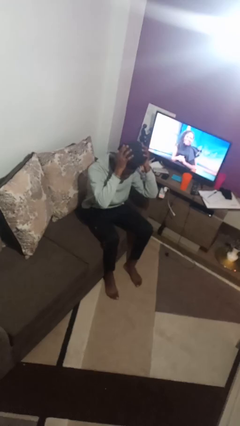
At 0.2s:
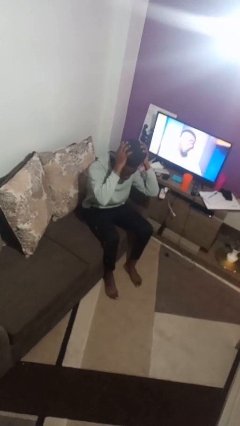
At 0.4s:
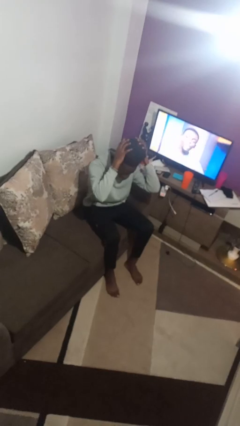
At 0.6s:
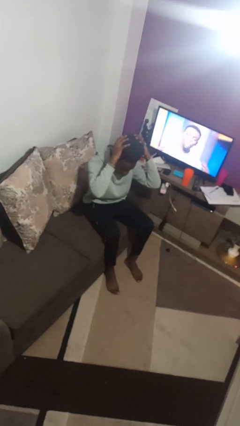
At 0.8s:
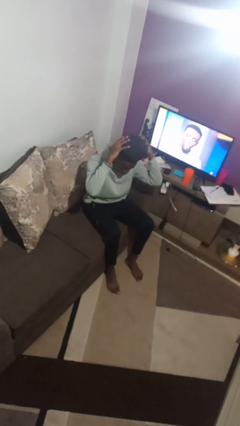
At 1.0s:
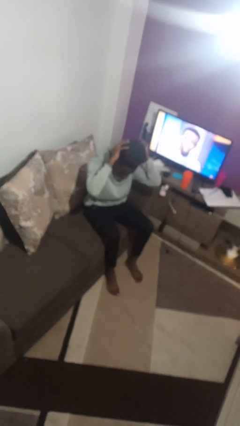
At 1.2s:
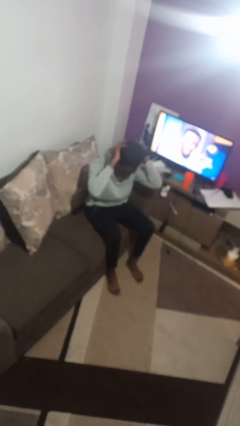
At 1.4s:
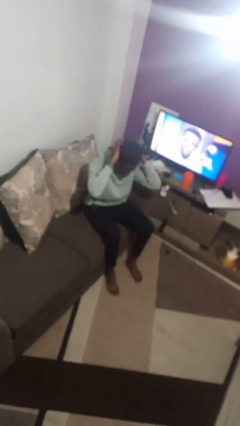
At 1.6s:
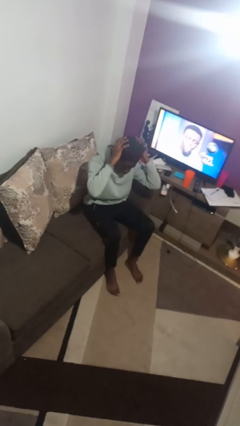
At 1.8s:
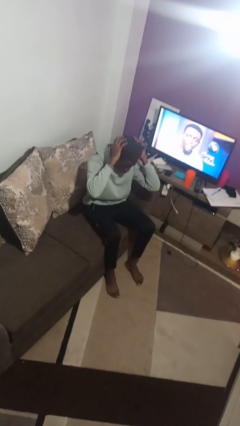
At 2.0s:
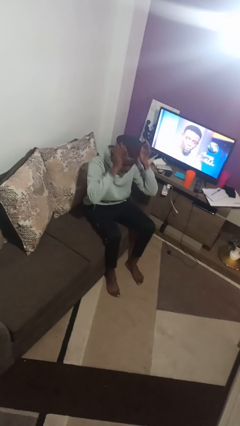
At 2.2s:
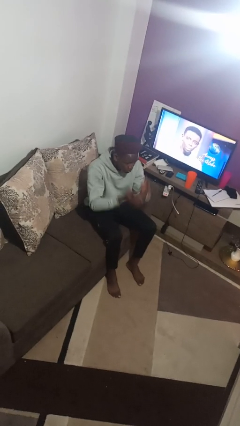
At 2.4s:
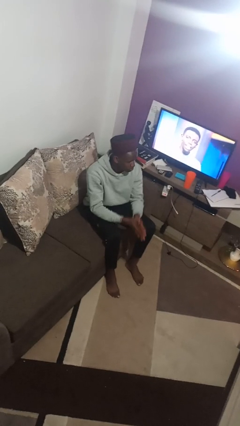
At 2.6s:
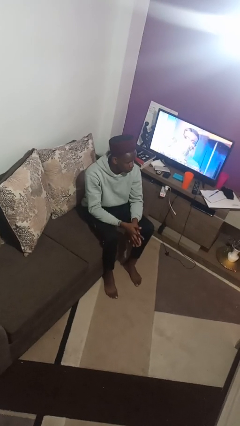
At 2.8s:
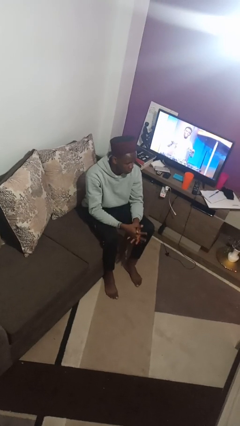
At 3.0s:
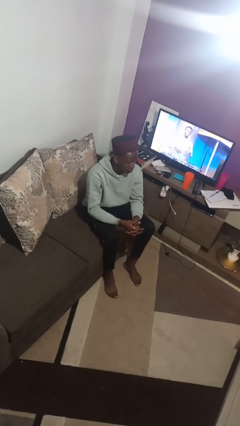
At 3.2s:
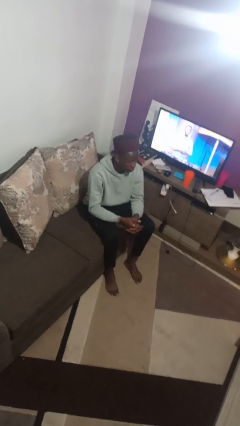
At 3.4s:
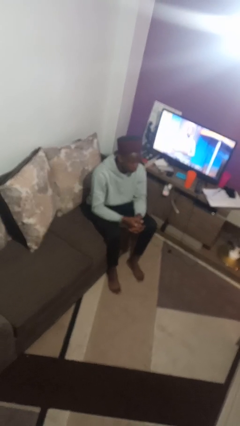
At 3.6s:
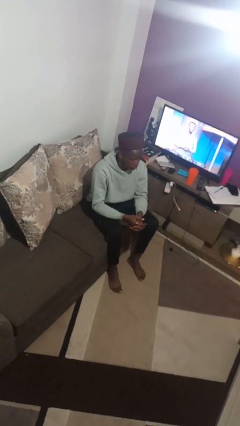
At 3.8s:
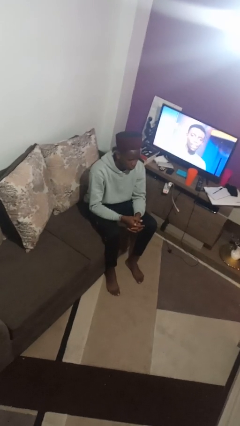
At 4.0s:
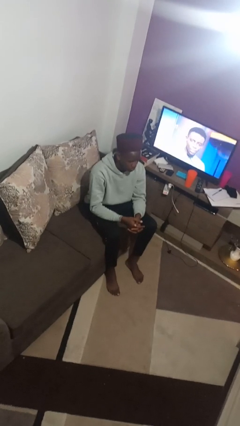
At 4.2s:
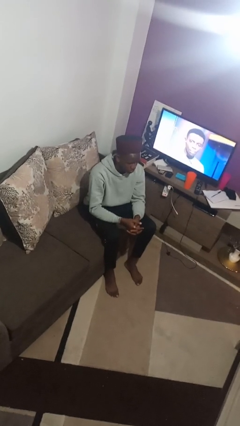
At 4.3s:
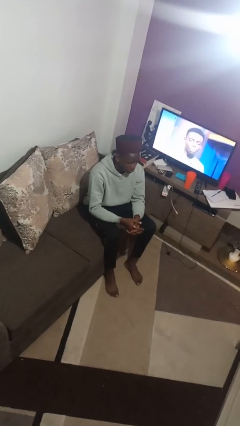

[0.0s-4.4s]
person puts on hat

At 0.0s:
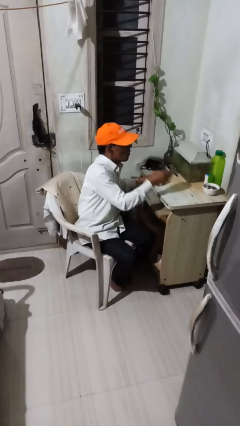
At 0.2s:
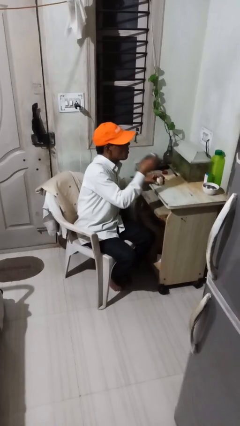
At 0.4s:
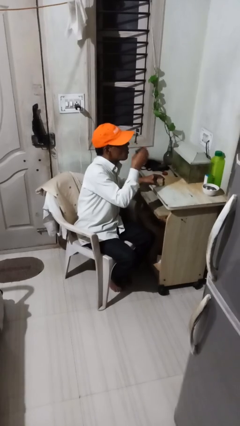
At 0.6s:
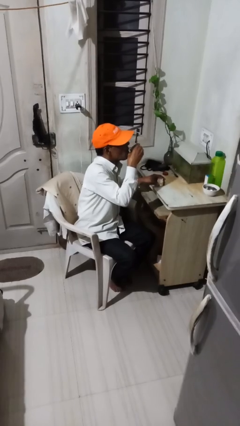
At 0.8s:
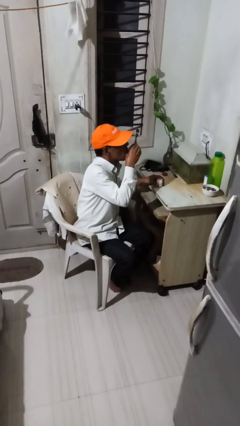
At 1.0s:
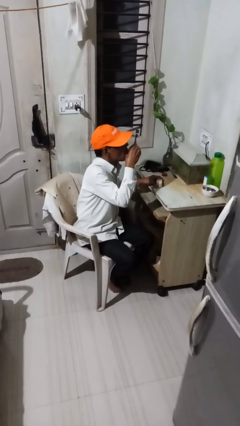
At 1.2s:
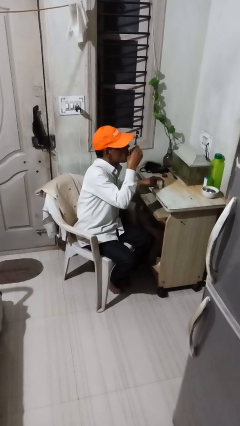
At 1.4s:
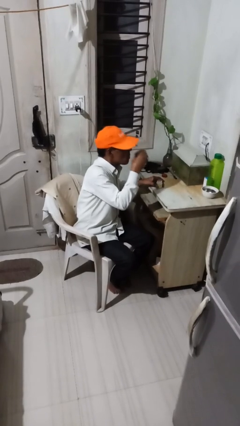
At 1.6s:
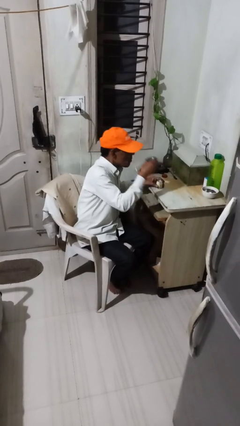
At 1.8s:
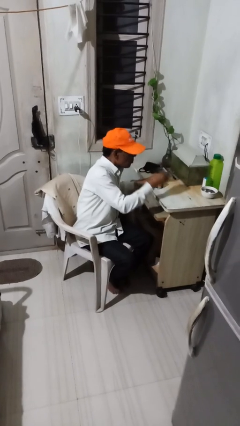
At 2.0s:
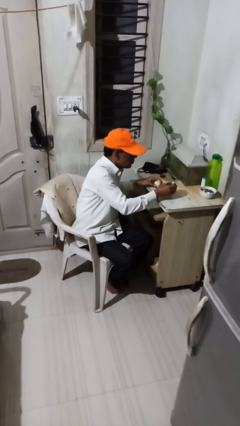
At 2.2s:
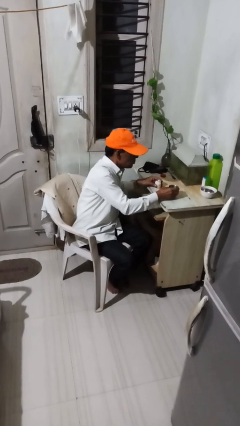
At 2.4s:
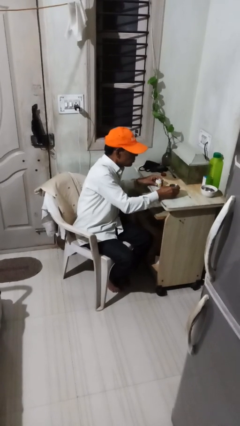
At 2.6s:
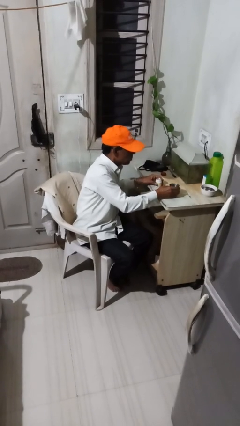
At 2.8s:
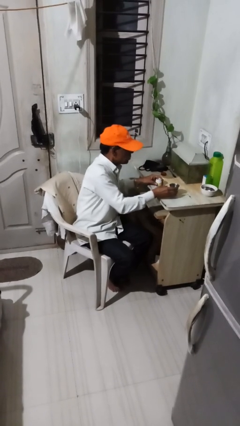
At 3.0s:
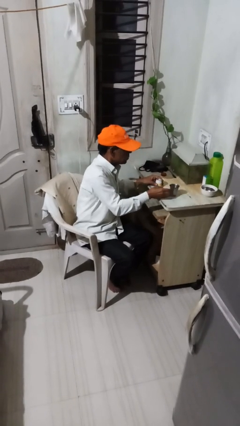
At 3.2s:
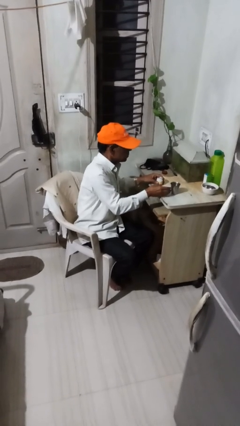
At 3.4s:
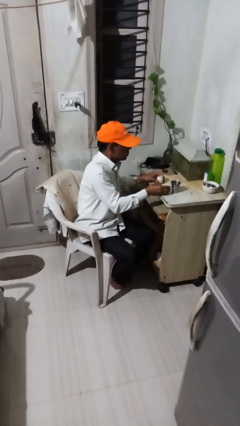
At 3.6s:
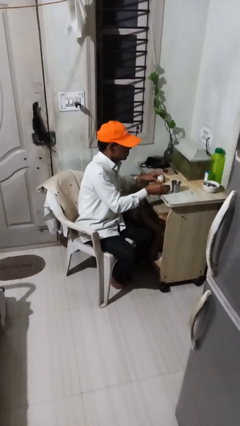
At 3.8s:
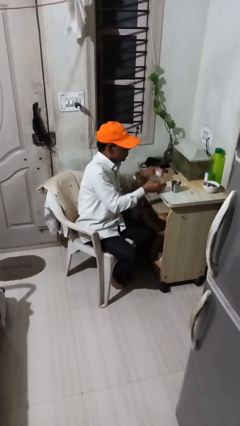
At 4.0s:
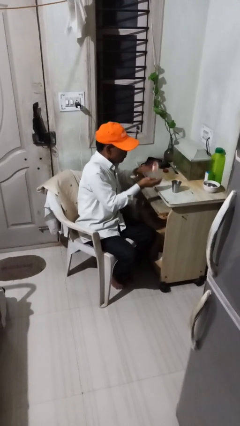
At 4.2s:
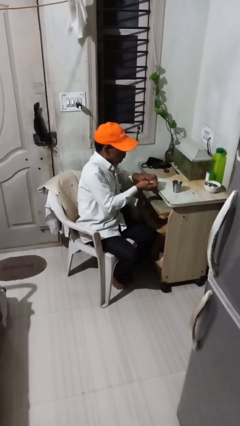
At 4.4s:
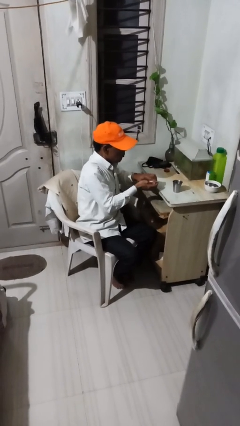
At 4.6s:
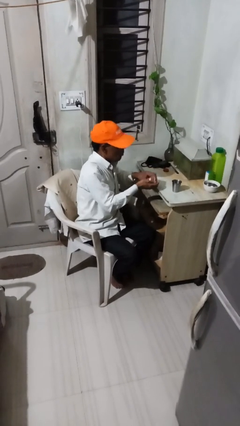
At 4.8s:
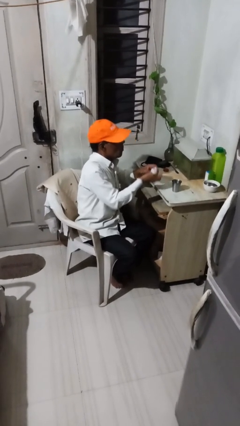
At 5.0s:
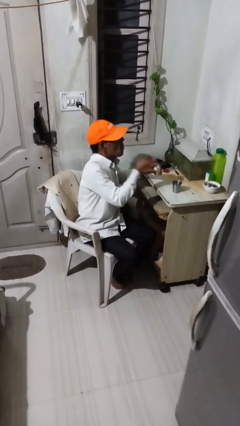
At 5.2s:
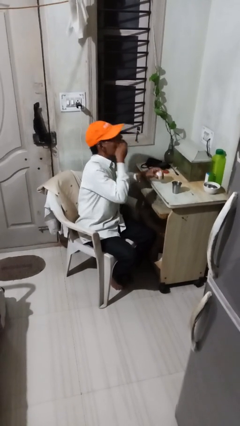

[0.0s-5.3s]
person folds socks

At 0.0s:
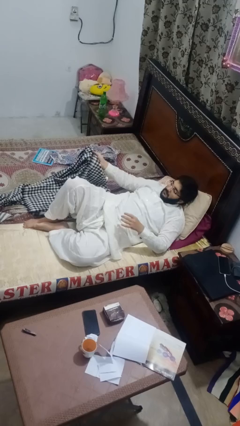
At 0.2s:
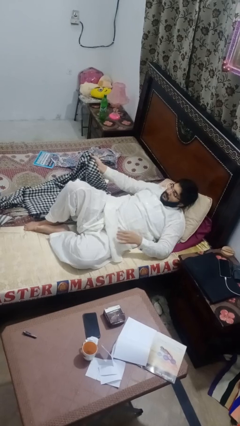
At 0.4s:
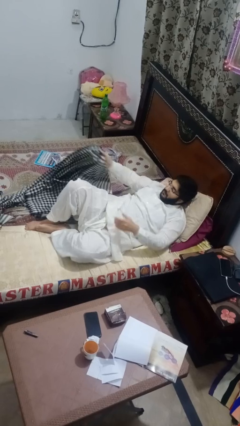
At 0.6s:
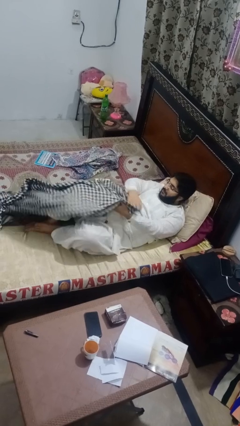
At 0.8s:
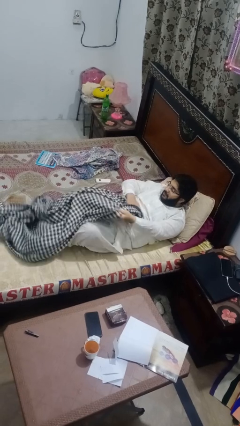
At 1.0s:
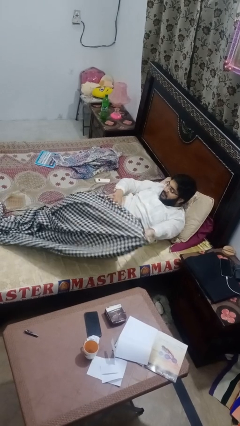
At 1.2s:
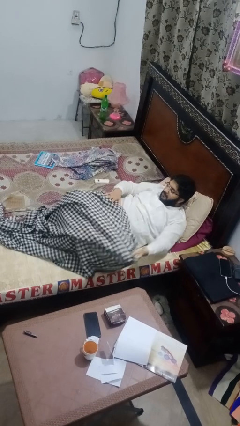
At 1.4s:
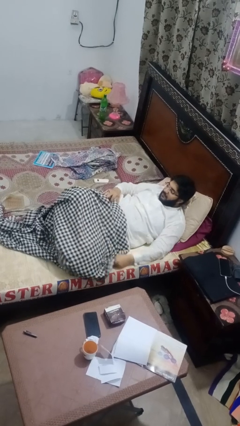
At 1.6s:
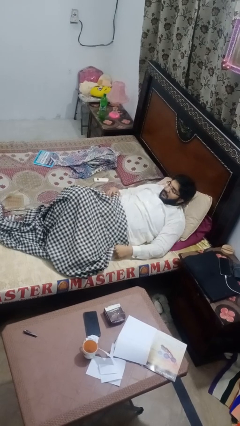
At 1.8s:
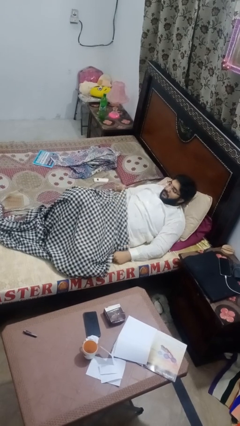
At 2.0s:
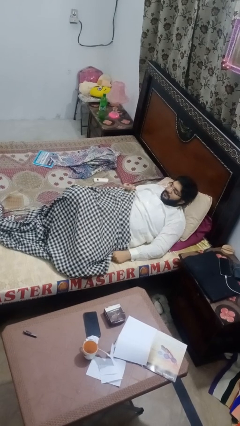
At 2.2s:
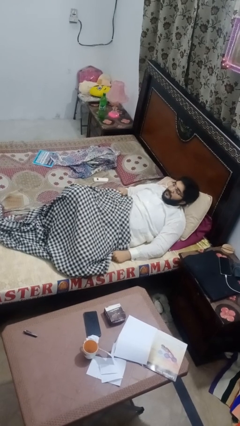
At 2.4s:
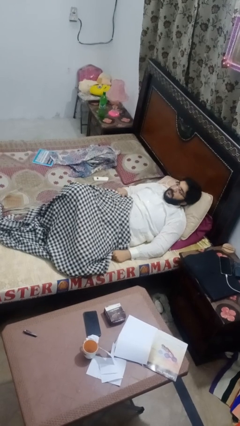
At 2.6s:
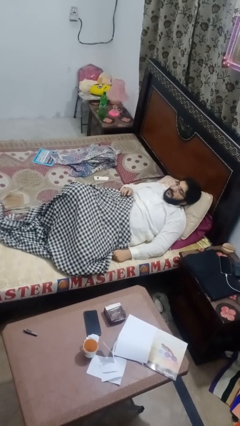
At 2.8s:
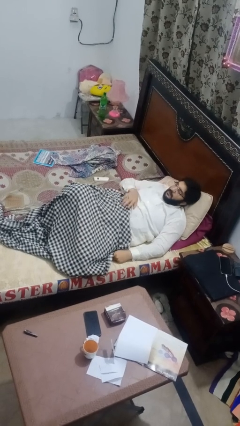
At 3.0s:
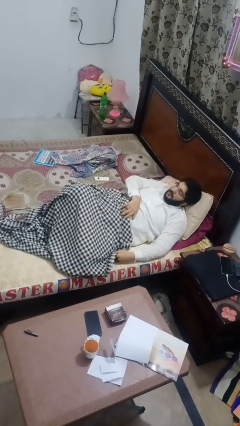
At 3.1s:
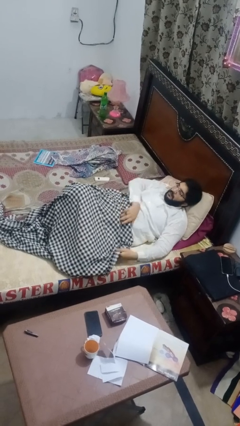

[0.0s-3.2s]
person covers with blanket

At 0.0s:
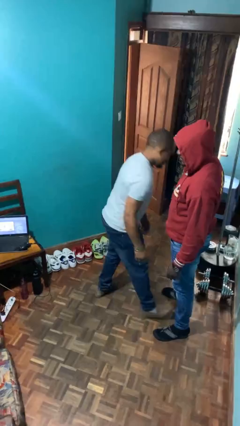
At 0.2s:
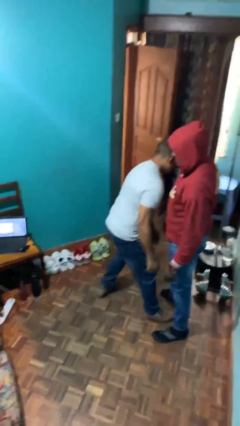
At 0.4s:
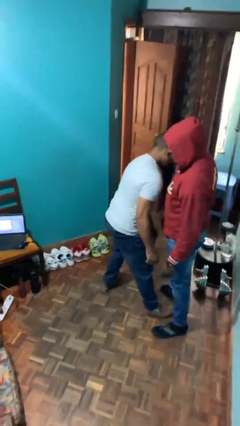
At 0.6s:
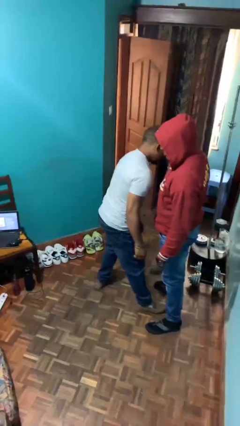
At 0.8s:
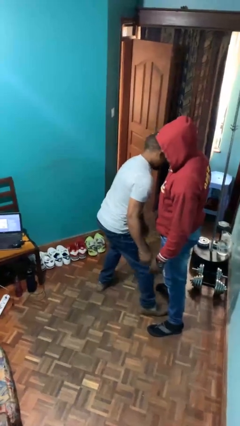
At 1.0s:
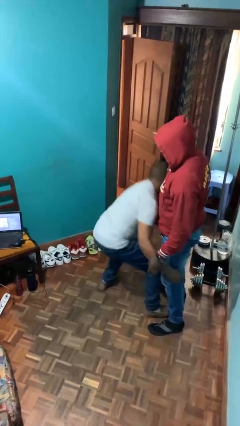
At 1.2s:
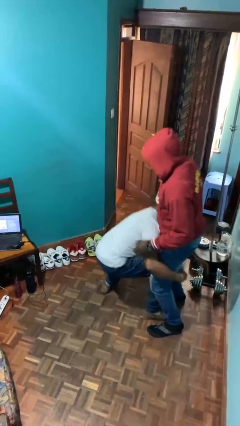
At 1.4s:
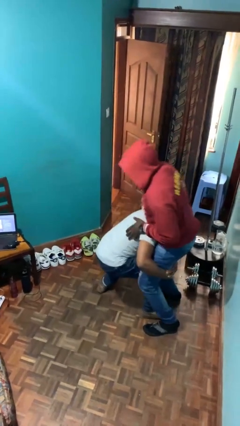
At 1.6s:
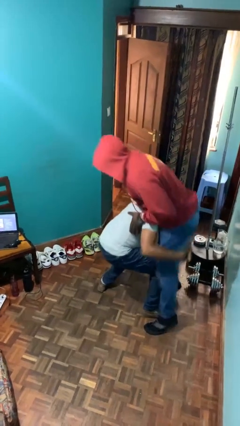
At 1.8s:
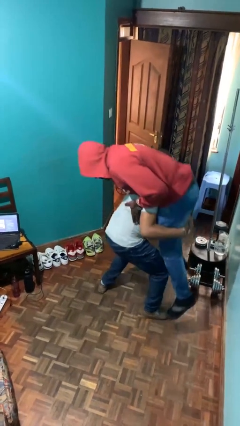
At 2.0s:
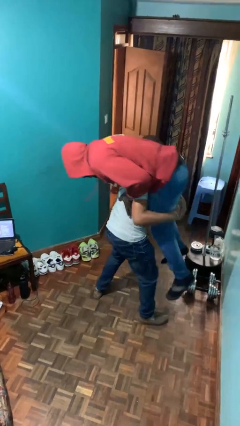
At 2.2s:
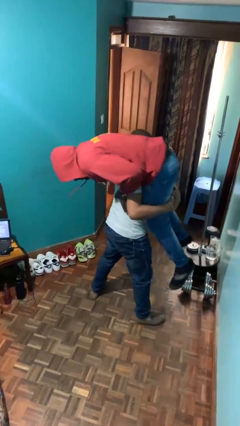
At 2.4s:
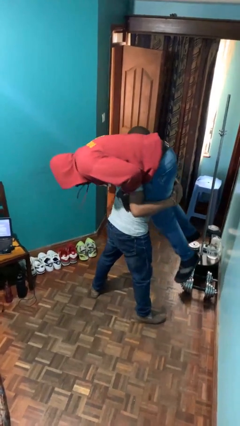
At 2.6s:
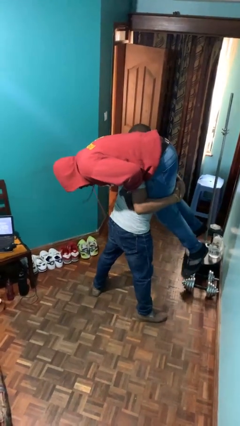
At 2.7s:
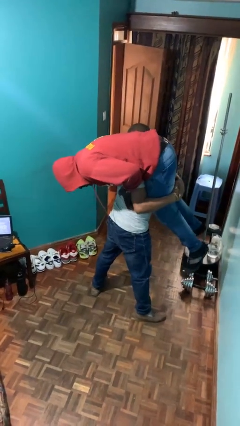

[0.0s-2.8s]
person carries person over shoulder

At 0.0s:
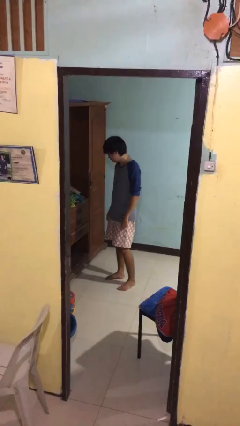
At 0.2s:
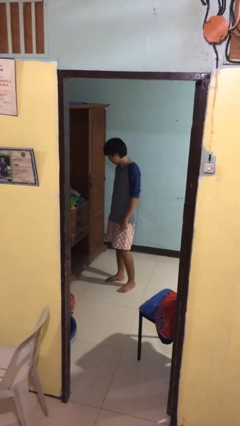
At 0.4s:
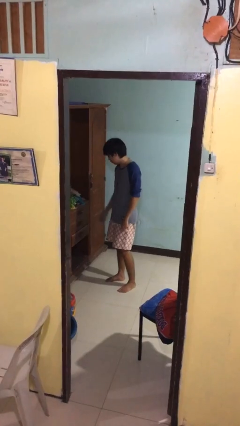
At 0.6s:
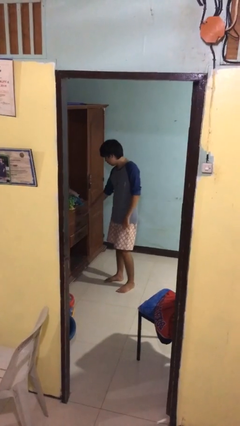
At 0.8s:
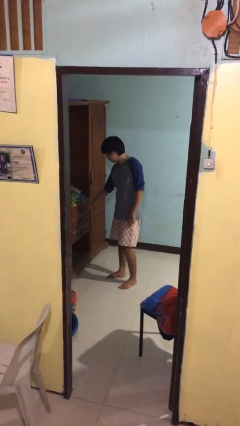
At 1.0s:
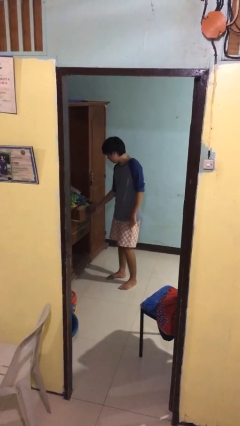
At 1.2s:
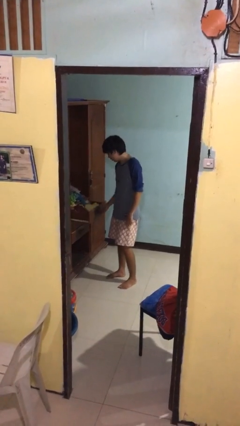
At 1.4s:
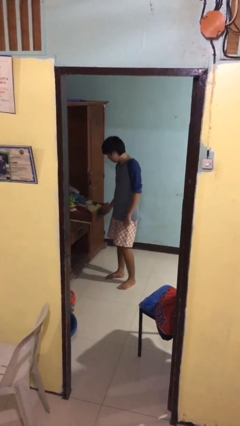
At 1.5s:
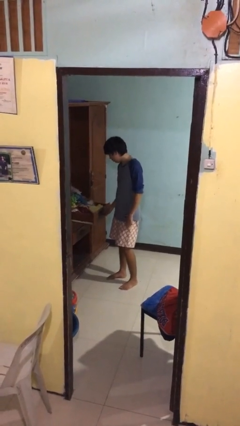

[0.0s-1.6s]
person opens dresser drawer

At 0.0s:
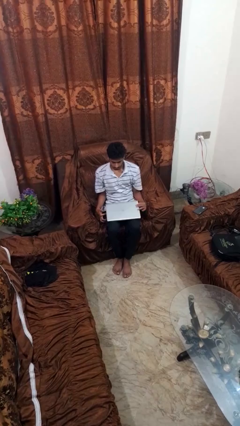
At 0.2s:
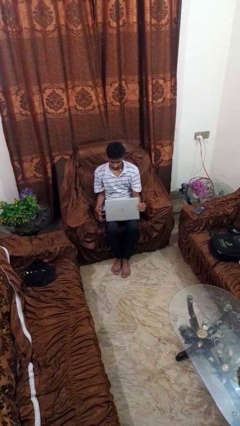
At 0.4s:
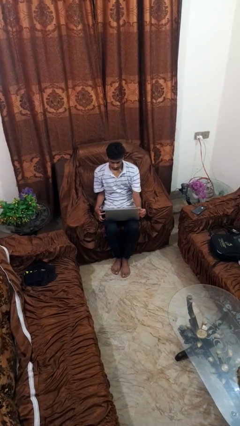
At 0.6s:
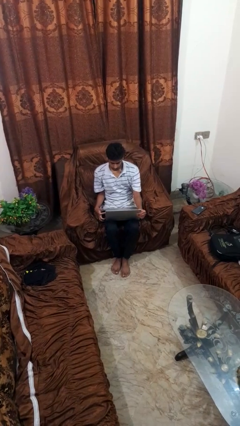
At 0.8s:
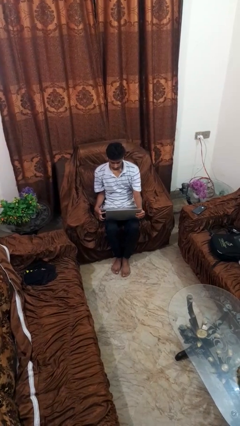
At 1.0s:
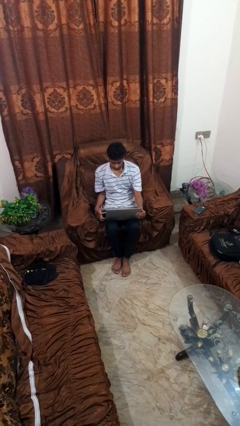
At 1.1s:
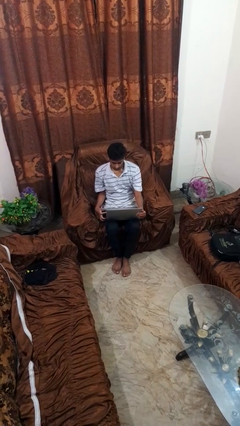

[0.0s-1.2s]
person opens laptop
